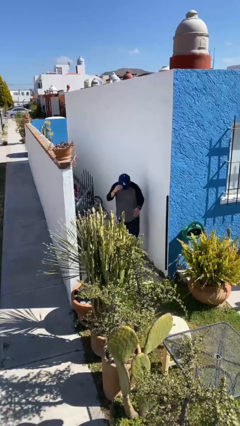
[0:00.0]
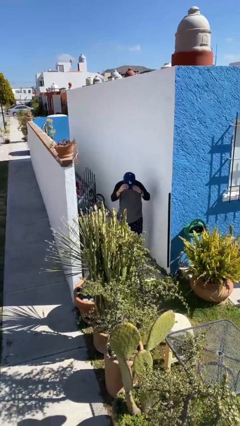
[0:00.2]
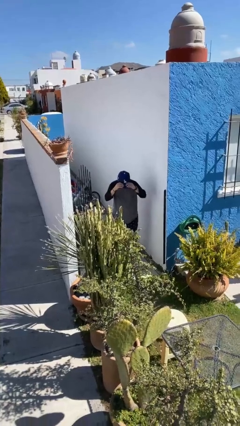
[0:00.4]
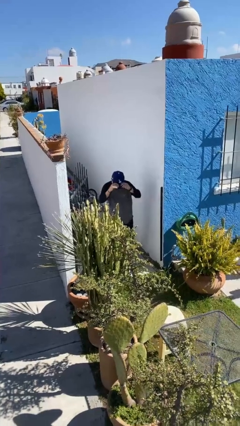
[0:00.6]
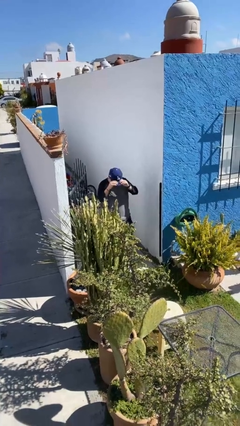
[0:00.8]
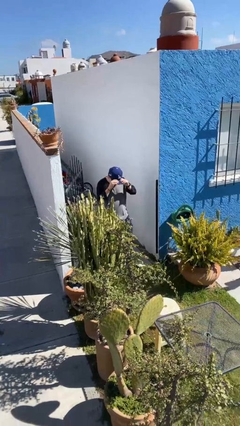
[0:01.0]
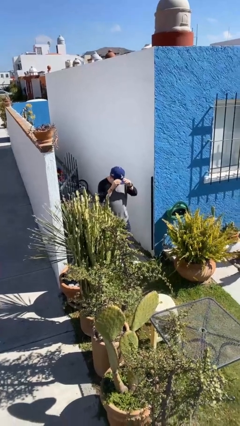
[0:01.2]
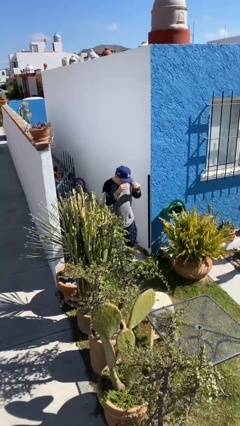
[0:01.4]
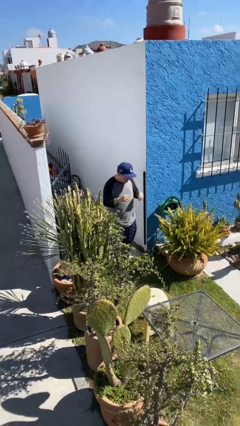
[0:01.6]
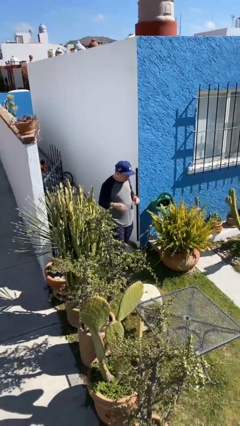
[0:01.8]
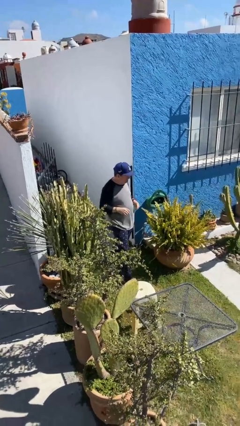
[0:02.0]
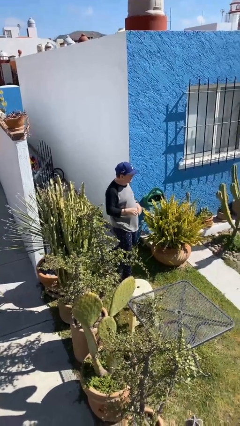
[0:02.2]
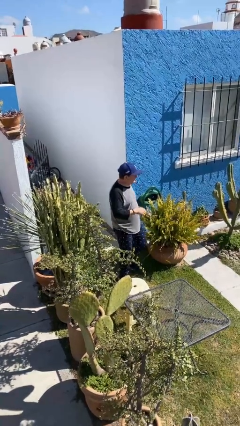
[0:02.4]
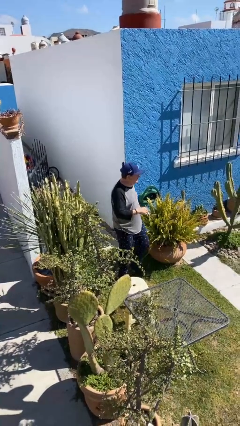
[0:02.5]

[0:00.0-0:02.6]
person enters scene through structure

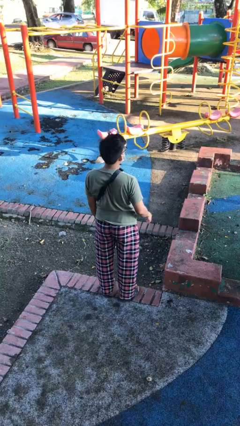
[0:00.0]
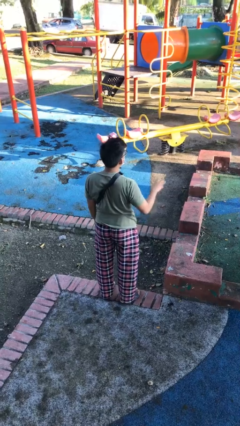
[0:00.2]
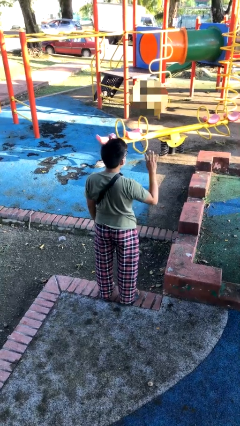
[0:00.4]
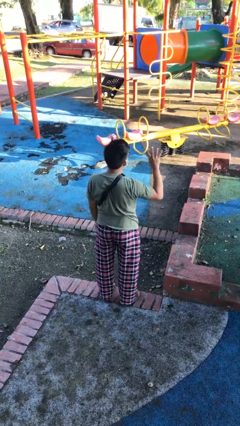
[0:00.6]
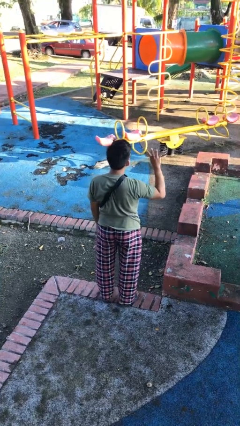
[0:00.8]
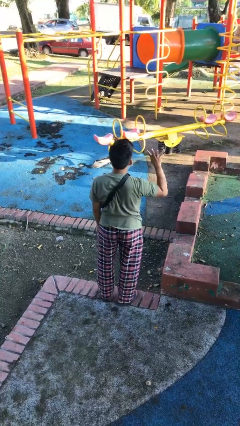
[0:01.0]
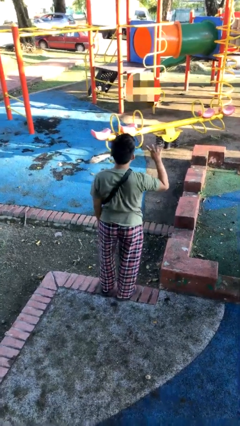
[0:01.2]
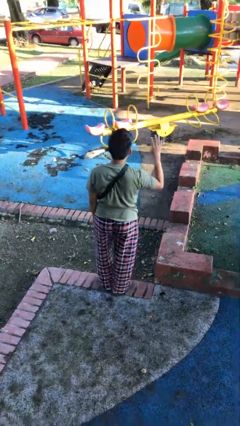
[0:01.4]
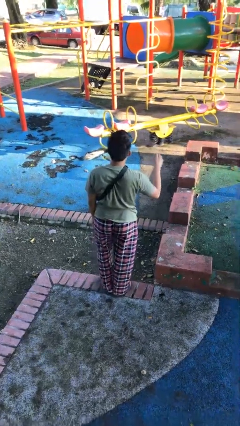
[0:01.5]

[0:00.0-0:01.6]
person gestures number four

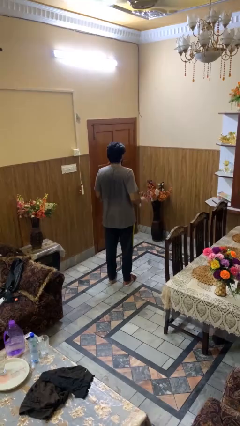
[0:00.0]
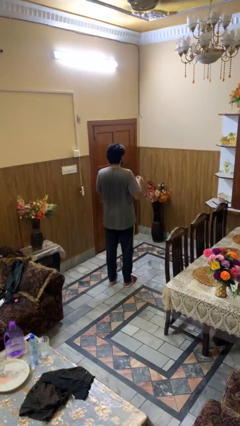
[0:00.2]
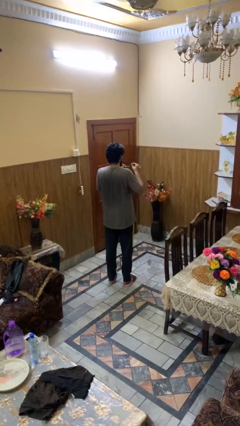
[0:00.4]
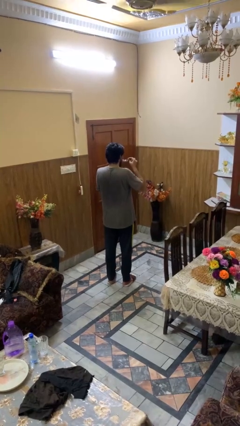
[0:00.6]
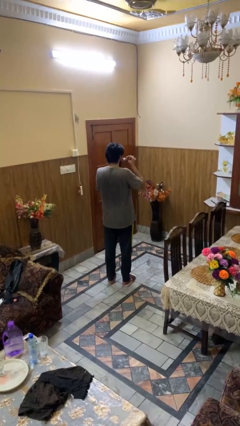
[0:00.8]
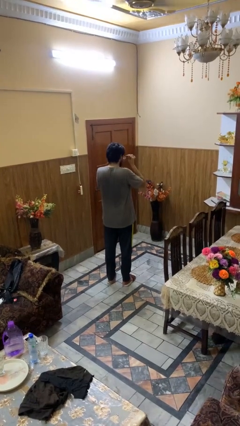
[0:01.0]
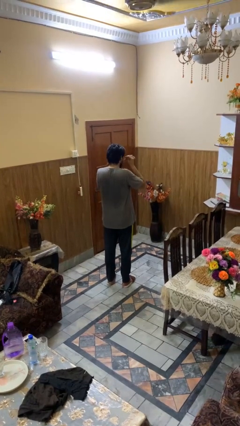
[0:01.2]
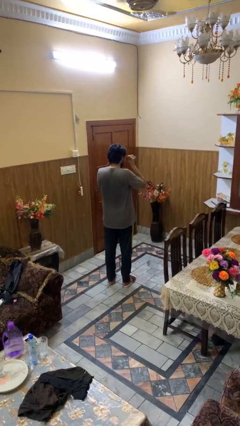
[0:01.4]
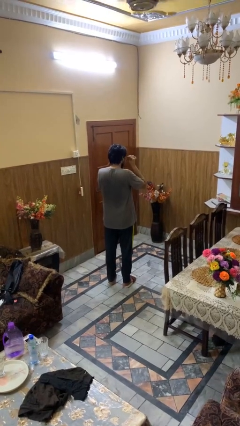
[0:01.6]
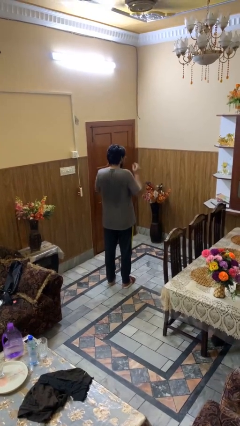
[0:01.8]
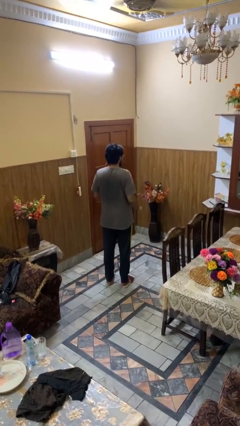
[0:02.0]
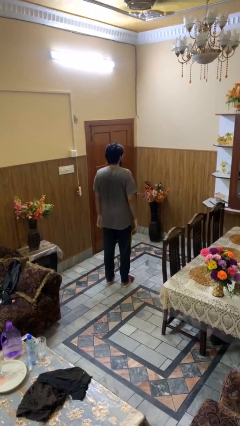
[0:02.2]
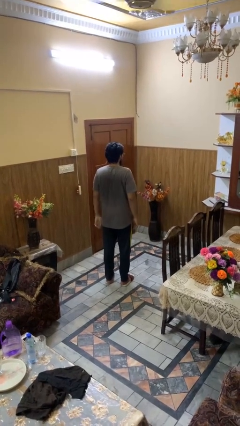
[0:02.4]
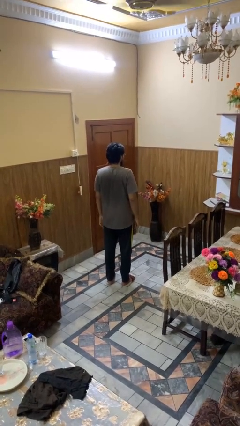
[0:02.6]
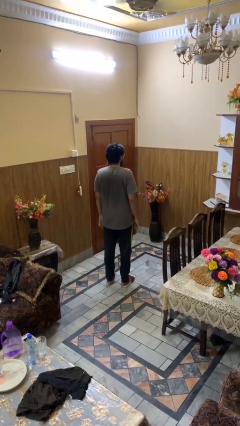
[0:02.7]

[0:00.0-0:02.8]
person puts on glasses

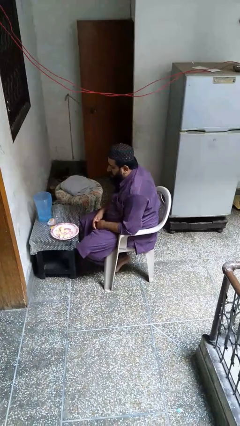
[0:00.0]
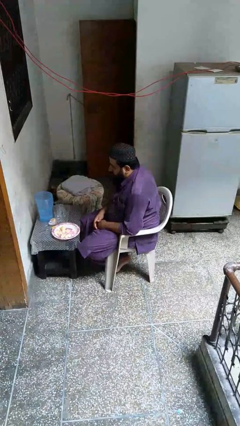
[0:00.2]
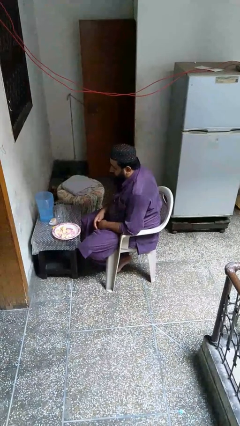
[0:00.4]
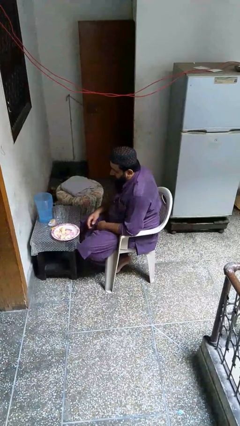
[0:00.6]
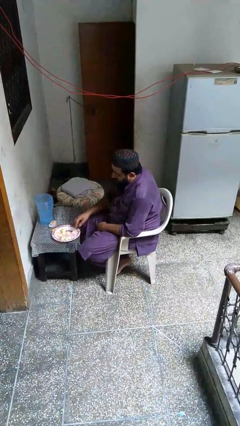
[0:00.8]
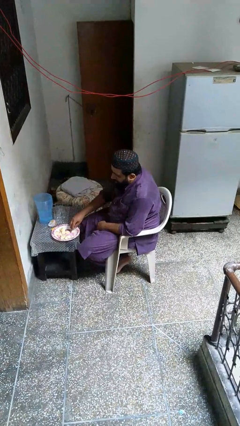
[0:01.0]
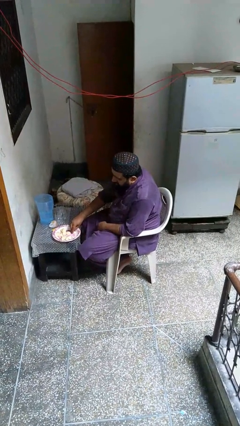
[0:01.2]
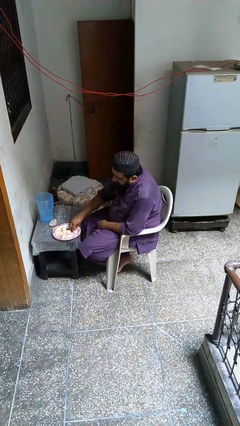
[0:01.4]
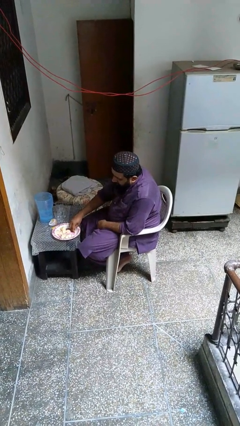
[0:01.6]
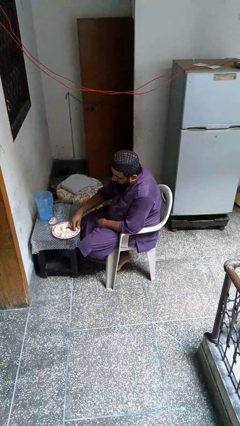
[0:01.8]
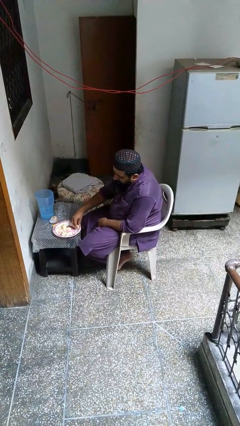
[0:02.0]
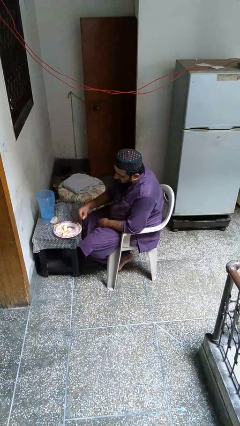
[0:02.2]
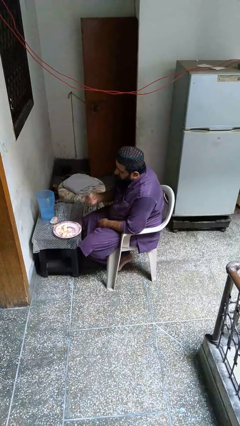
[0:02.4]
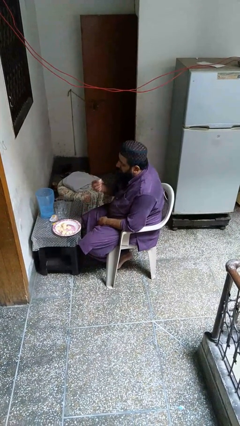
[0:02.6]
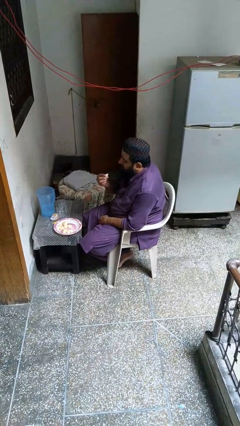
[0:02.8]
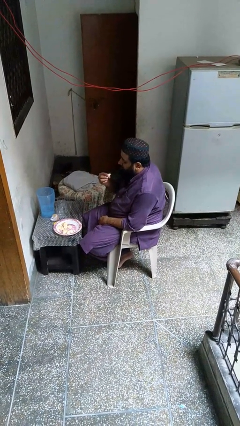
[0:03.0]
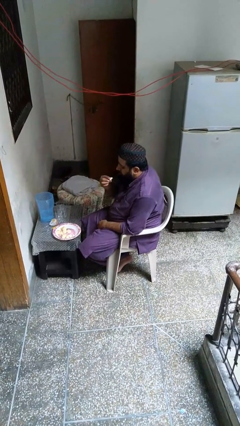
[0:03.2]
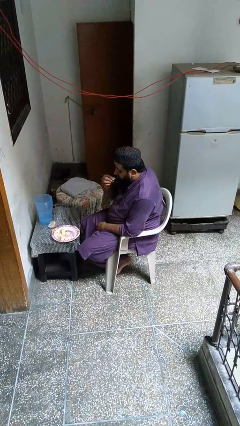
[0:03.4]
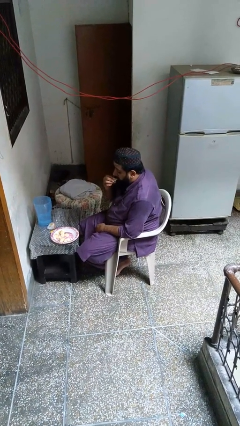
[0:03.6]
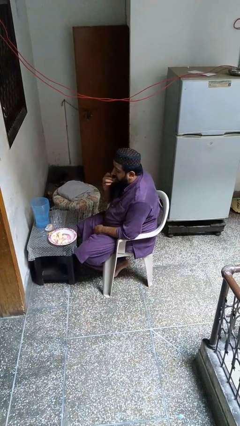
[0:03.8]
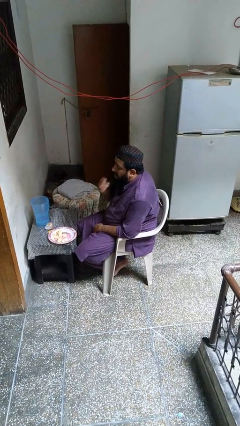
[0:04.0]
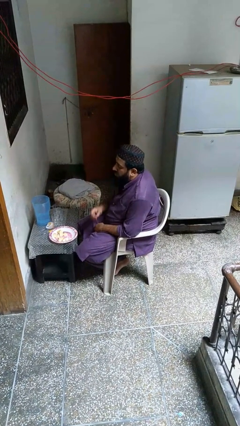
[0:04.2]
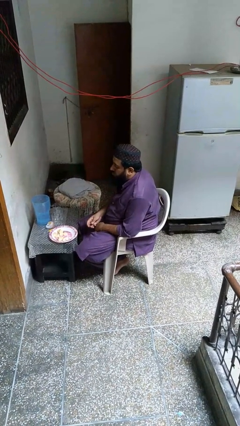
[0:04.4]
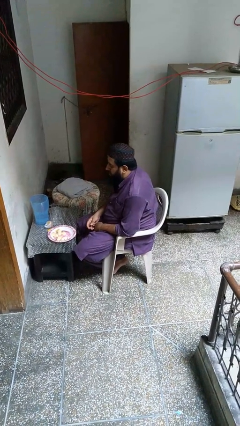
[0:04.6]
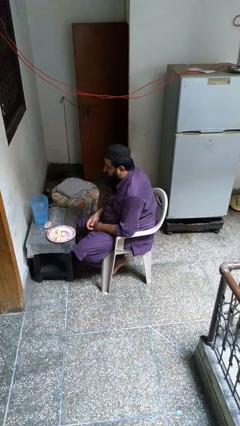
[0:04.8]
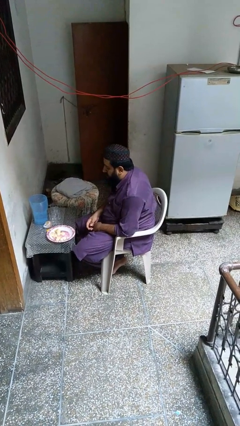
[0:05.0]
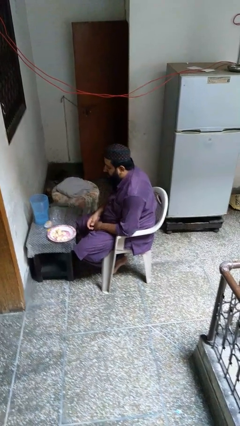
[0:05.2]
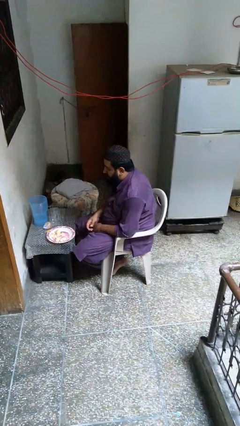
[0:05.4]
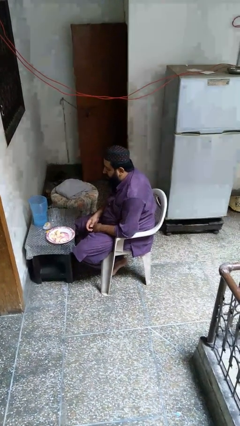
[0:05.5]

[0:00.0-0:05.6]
person eats with hands

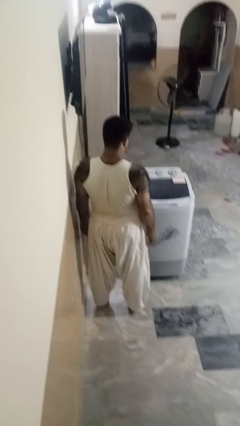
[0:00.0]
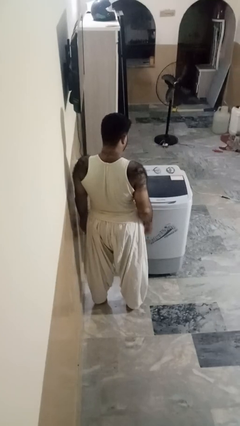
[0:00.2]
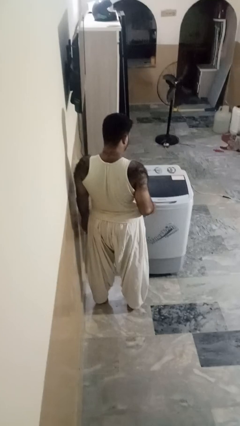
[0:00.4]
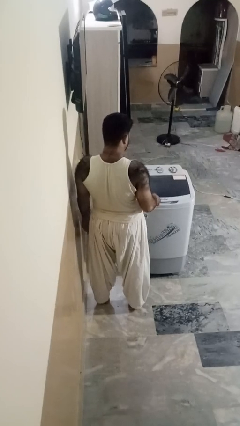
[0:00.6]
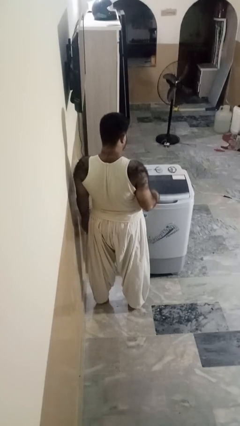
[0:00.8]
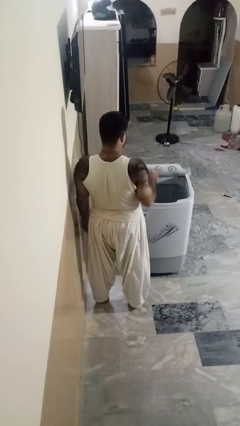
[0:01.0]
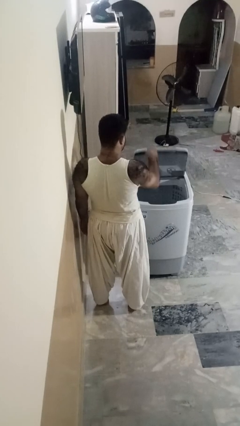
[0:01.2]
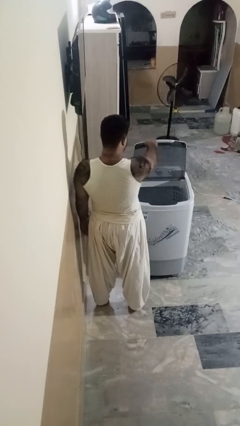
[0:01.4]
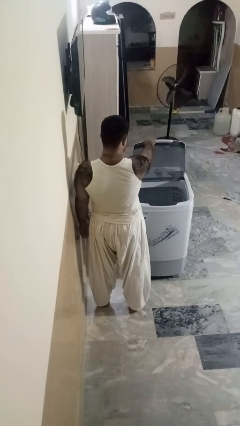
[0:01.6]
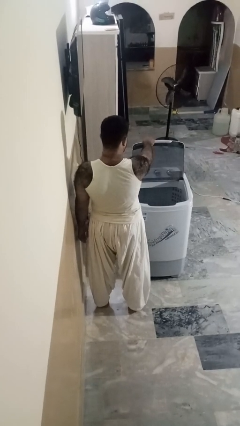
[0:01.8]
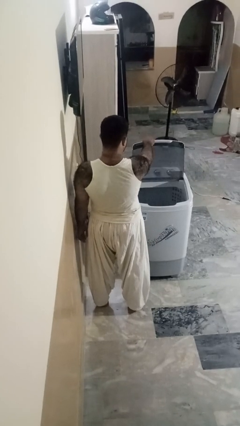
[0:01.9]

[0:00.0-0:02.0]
person opens clothes washer

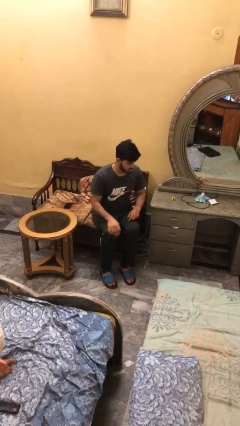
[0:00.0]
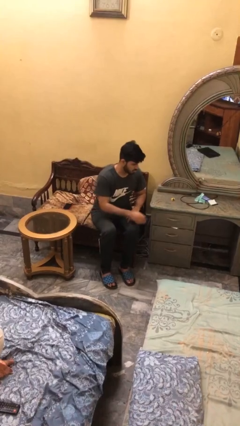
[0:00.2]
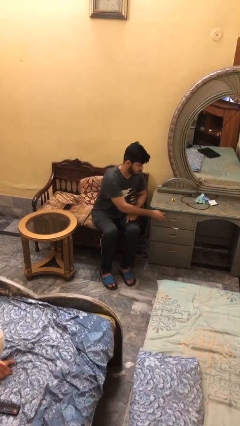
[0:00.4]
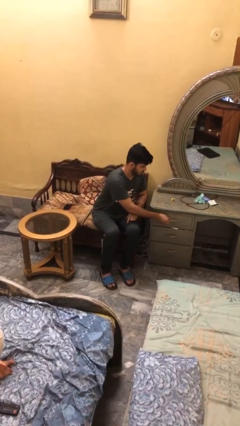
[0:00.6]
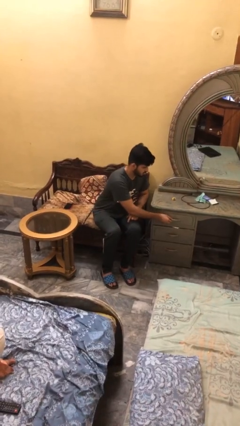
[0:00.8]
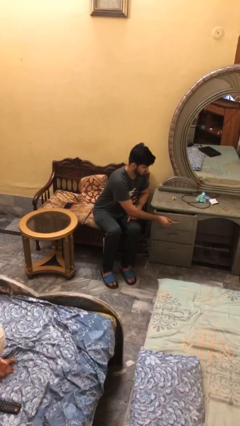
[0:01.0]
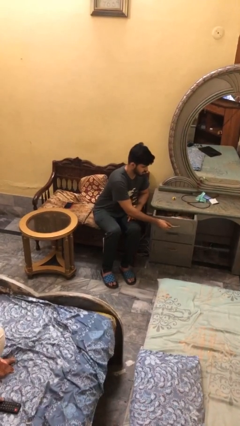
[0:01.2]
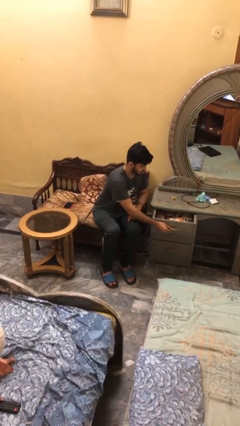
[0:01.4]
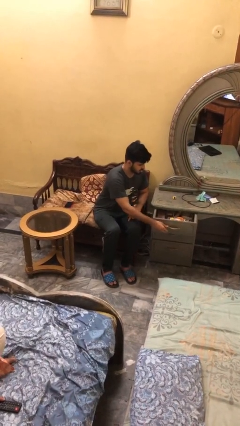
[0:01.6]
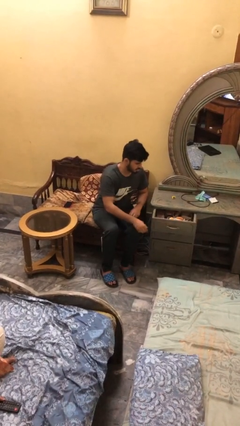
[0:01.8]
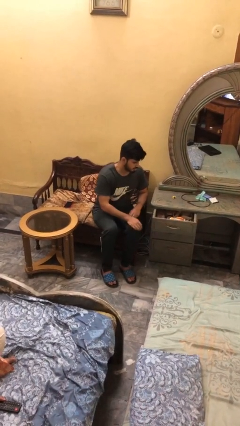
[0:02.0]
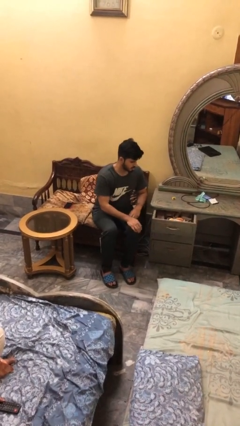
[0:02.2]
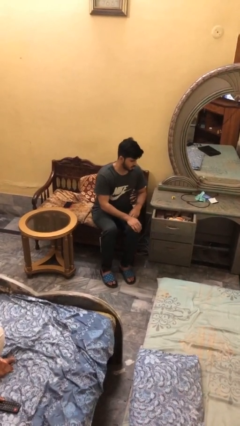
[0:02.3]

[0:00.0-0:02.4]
person opens dresser drawer
